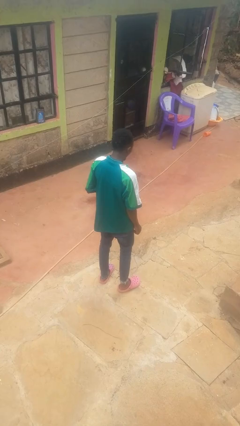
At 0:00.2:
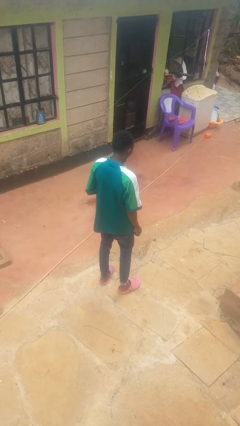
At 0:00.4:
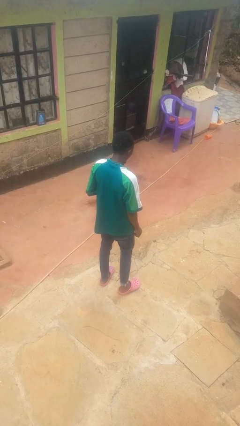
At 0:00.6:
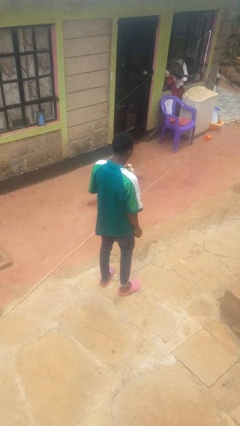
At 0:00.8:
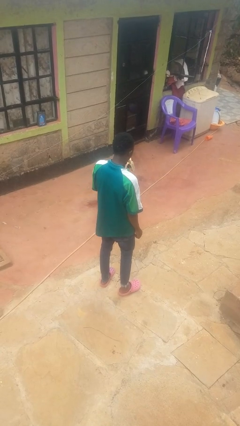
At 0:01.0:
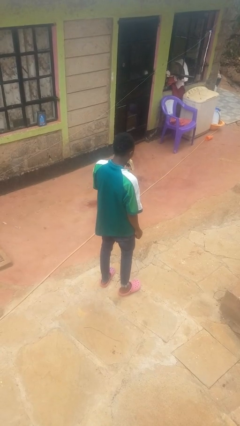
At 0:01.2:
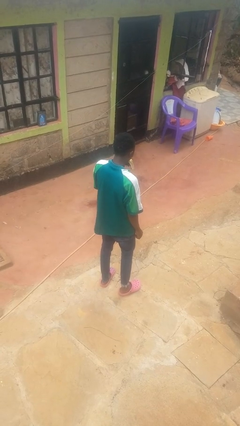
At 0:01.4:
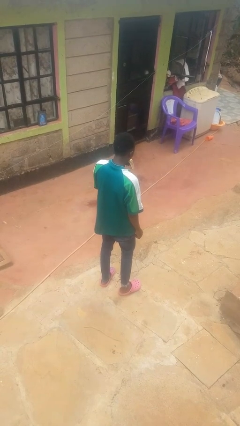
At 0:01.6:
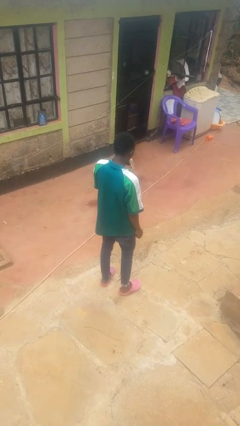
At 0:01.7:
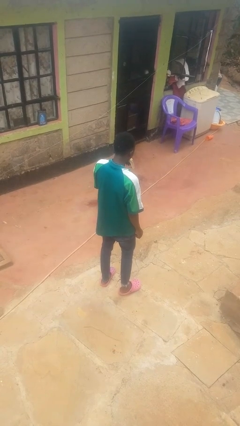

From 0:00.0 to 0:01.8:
person eats banana

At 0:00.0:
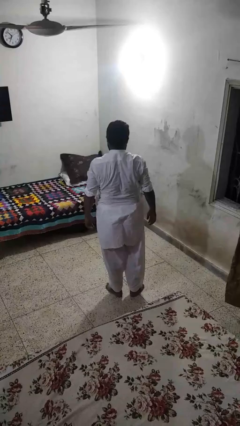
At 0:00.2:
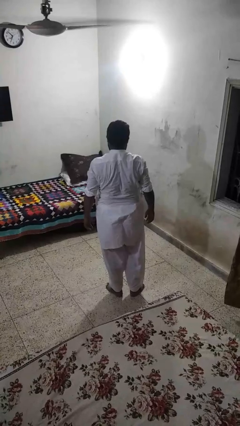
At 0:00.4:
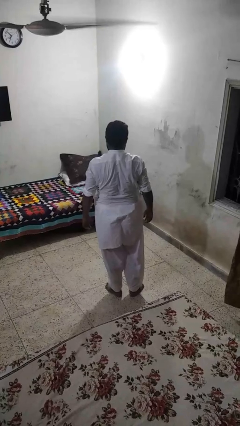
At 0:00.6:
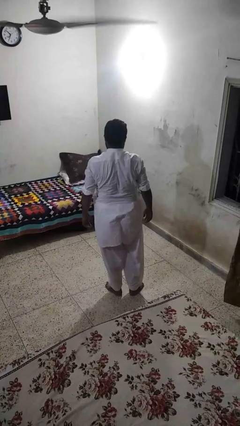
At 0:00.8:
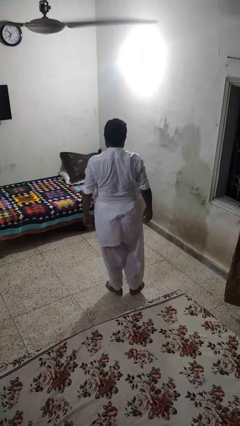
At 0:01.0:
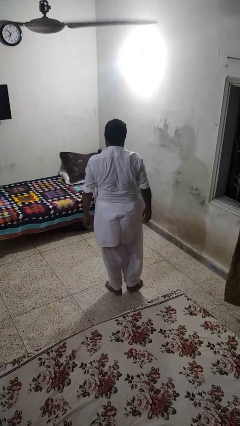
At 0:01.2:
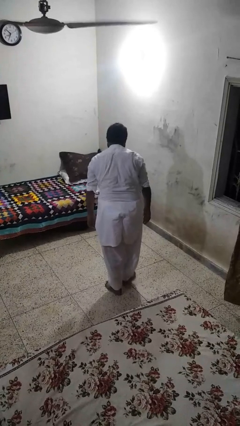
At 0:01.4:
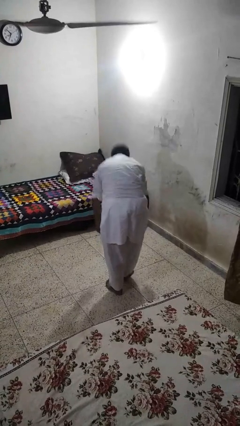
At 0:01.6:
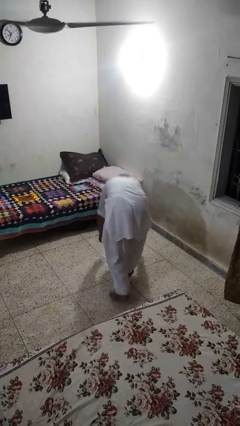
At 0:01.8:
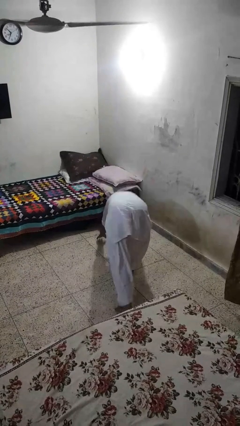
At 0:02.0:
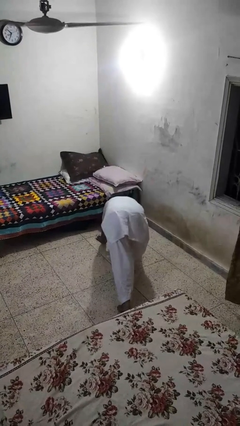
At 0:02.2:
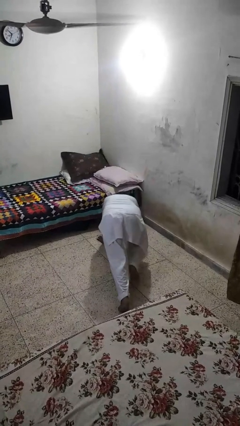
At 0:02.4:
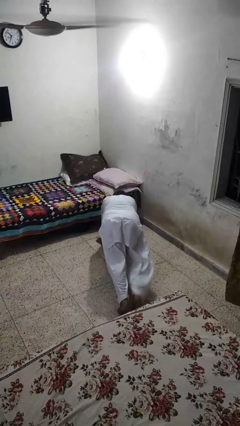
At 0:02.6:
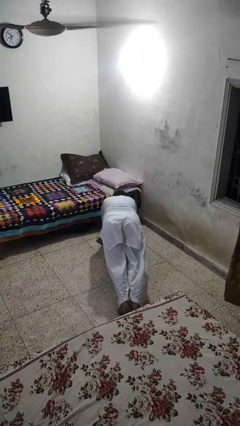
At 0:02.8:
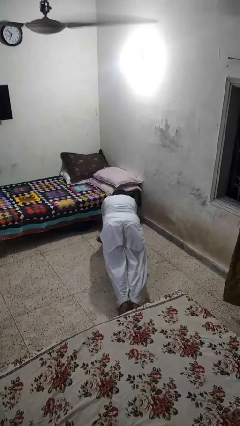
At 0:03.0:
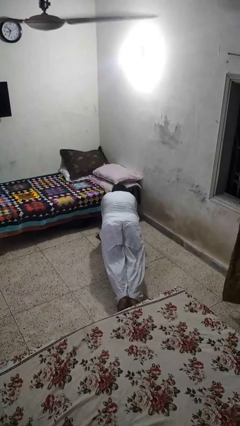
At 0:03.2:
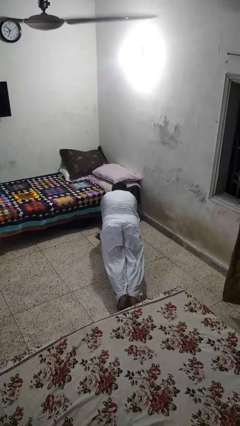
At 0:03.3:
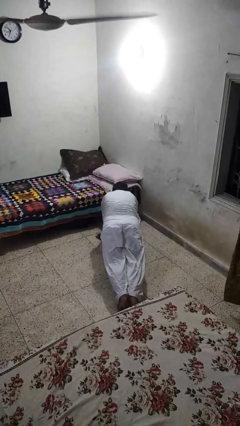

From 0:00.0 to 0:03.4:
person exercises with plank

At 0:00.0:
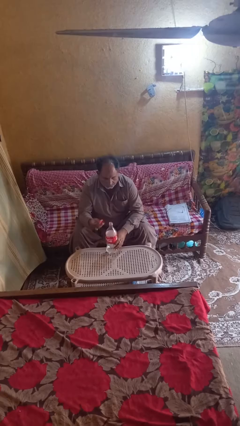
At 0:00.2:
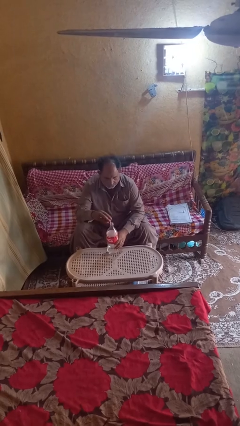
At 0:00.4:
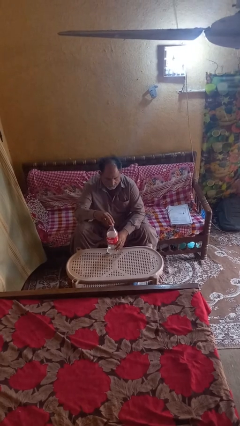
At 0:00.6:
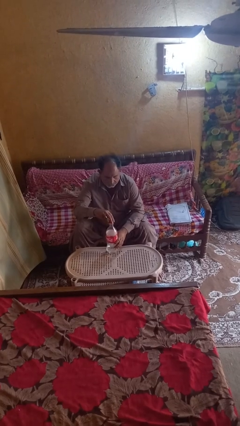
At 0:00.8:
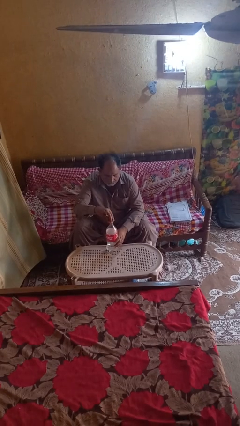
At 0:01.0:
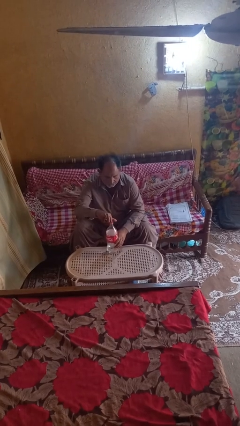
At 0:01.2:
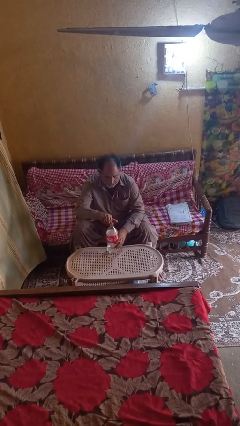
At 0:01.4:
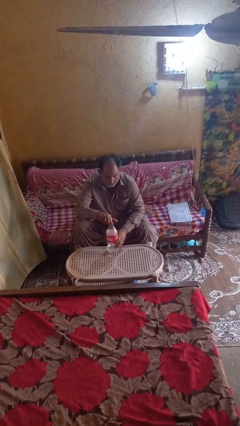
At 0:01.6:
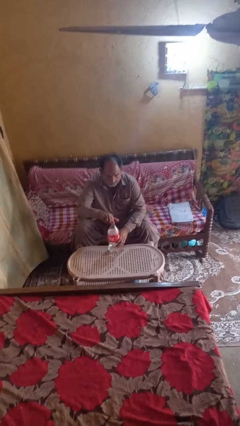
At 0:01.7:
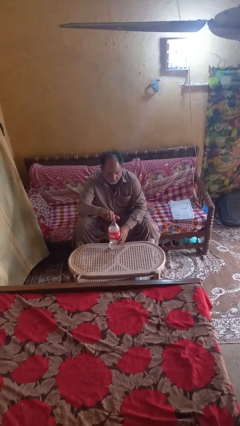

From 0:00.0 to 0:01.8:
person screws lid to bottle

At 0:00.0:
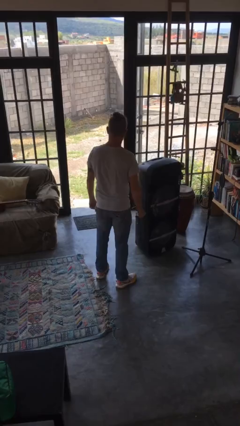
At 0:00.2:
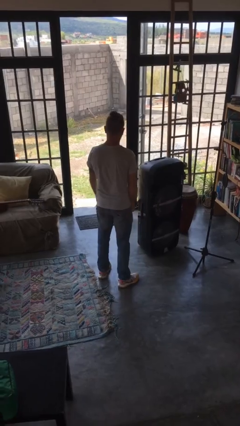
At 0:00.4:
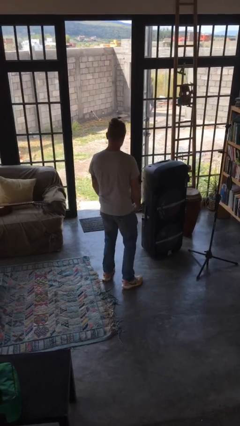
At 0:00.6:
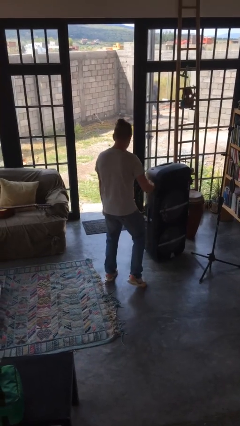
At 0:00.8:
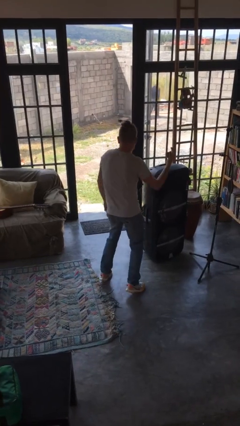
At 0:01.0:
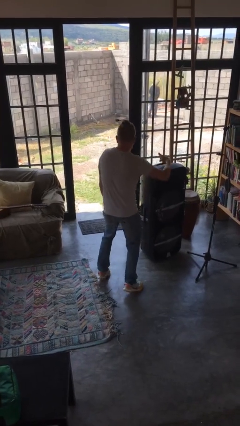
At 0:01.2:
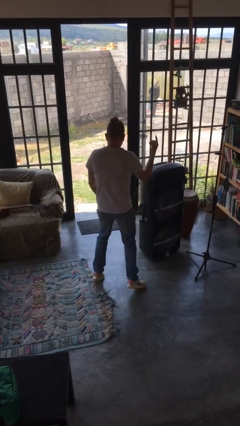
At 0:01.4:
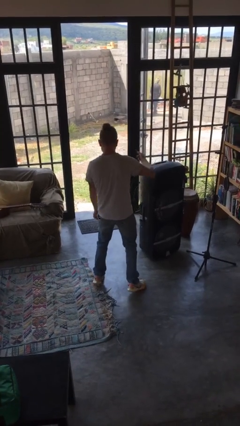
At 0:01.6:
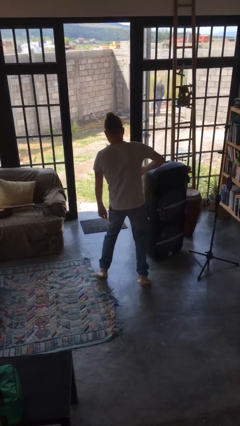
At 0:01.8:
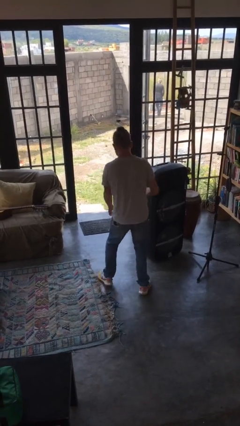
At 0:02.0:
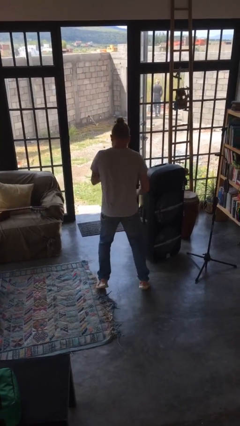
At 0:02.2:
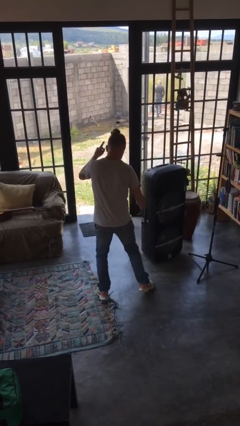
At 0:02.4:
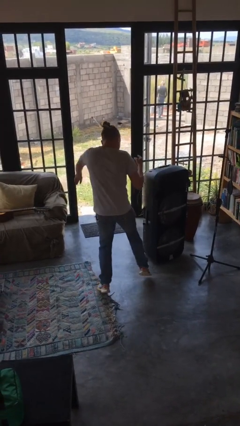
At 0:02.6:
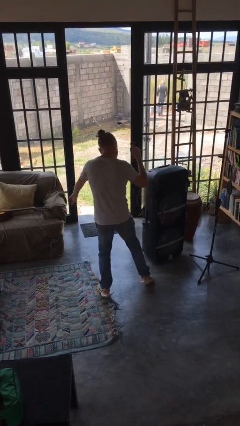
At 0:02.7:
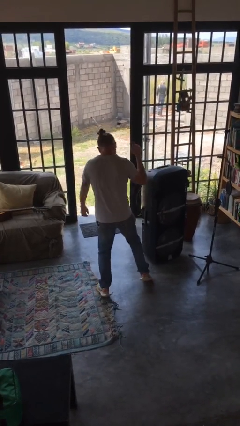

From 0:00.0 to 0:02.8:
person dances in place

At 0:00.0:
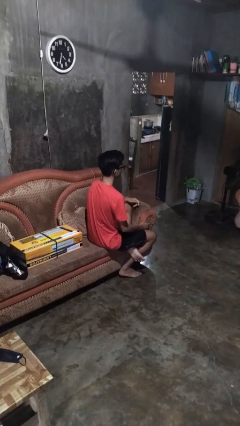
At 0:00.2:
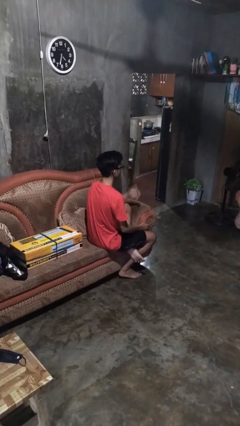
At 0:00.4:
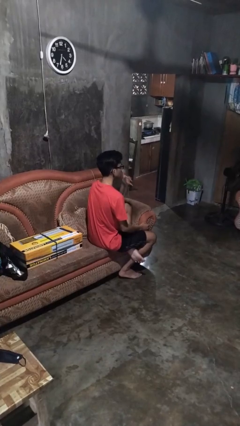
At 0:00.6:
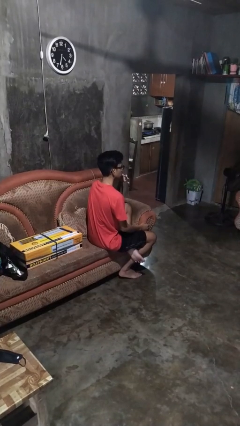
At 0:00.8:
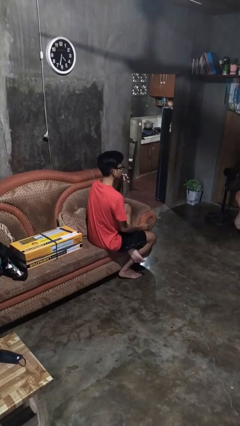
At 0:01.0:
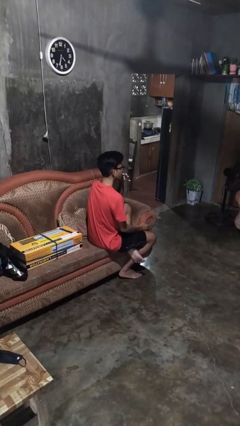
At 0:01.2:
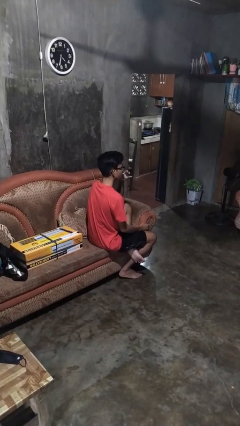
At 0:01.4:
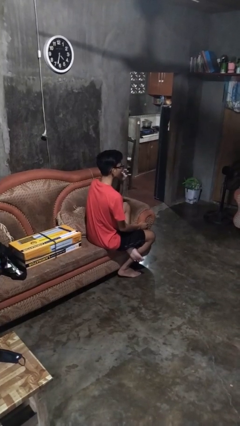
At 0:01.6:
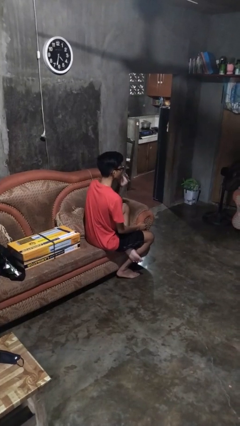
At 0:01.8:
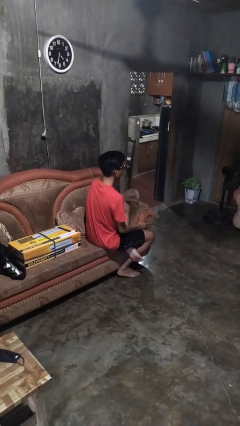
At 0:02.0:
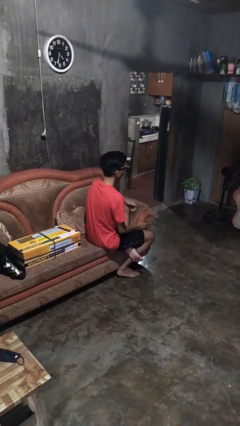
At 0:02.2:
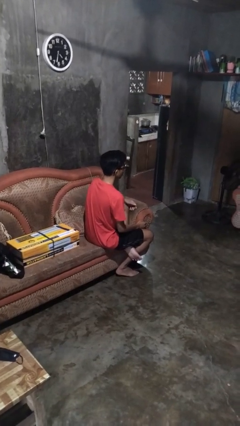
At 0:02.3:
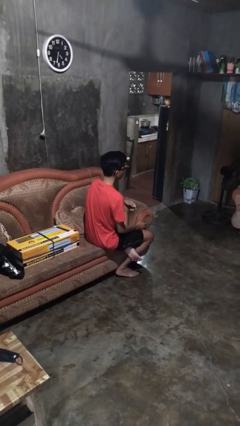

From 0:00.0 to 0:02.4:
person licks fingers

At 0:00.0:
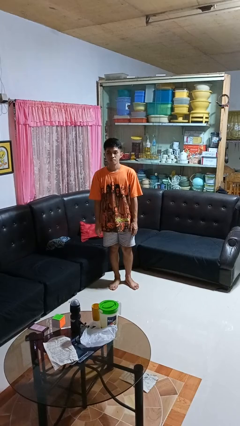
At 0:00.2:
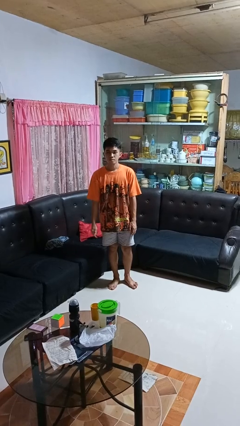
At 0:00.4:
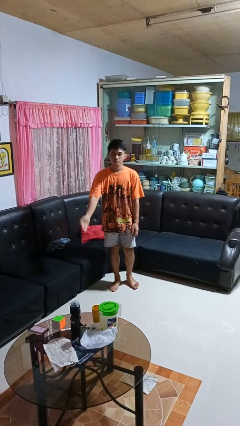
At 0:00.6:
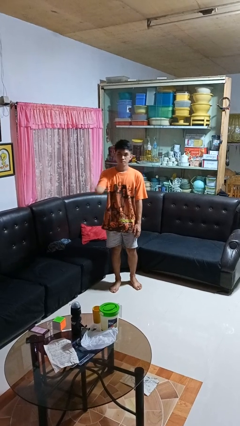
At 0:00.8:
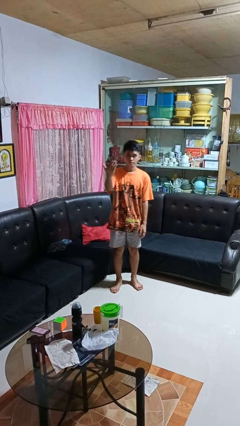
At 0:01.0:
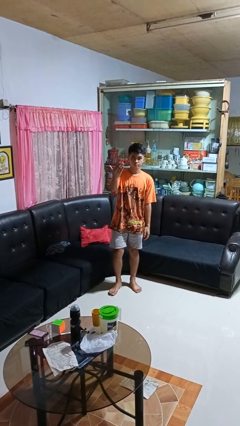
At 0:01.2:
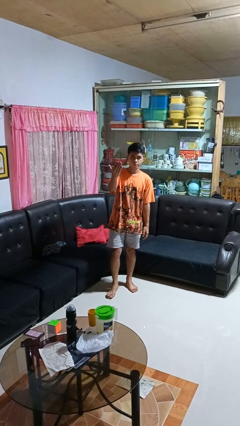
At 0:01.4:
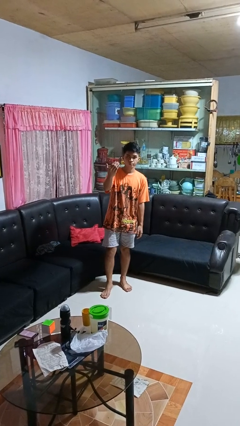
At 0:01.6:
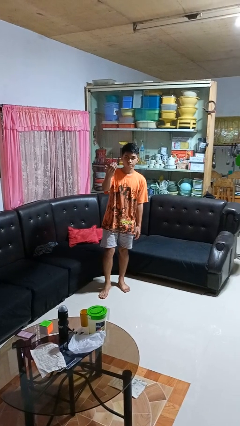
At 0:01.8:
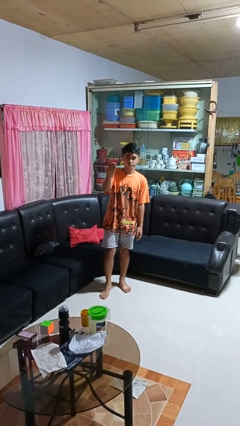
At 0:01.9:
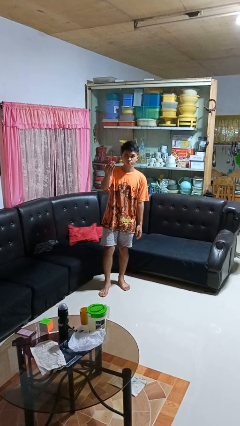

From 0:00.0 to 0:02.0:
person gestures come here

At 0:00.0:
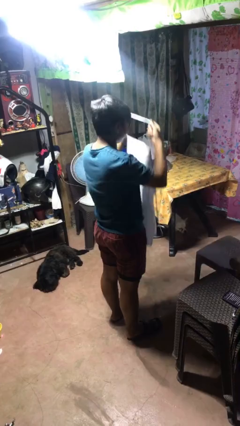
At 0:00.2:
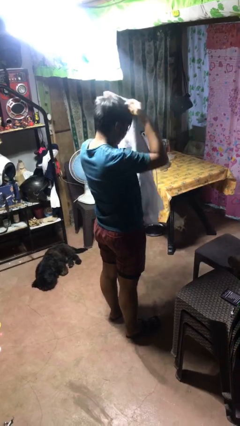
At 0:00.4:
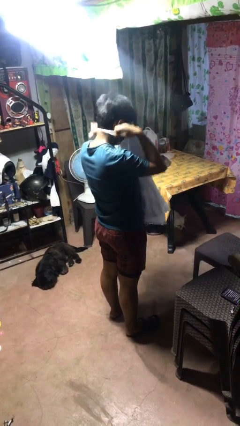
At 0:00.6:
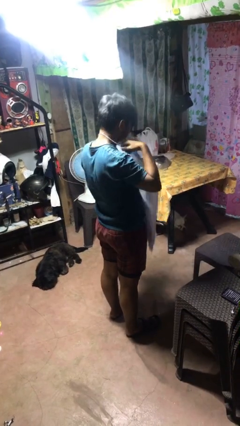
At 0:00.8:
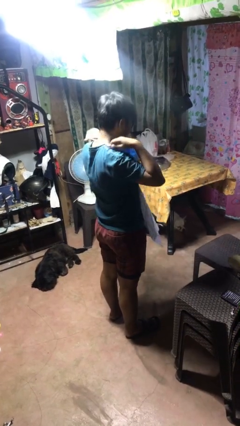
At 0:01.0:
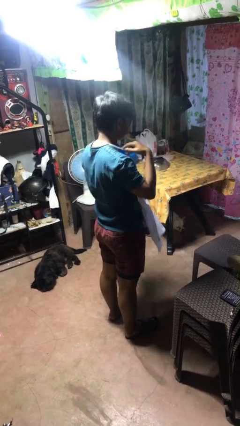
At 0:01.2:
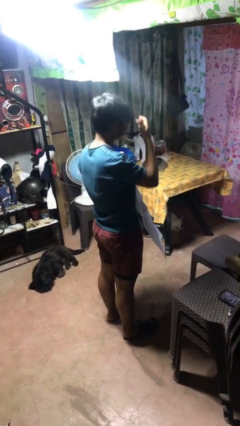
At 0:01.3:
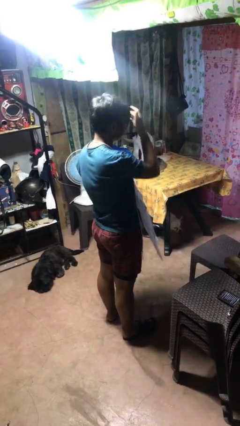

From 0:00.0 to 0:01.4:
person puts on apron

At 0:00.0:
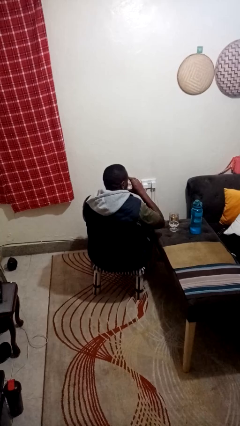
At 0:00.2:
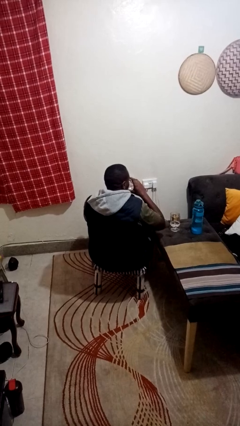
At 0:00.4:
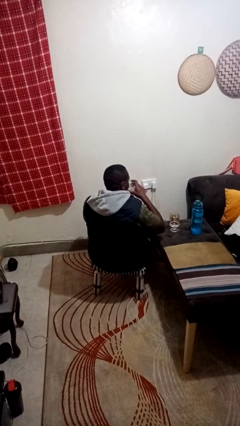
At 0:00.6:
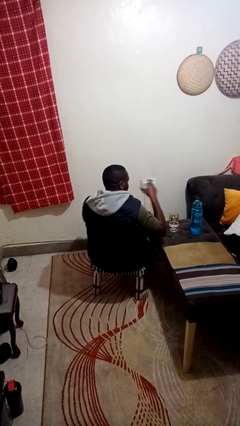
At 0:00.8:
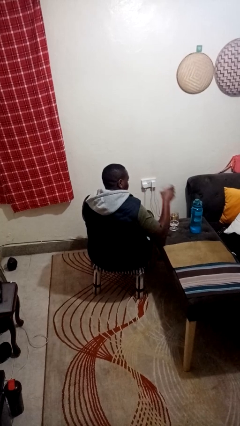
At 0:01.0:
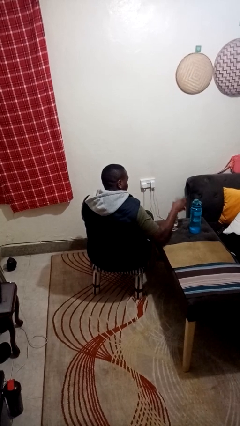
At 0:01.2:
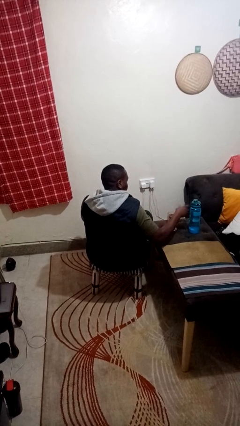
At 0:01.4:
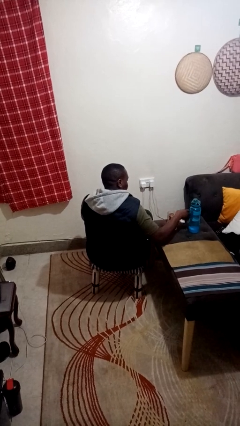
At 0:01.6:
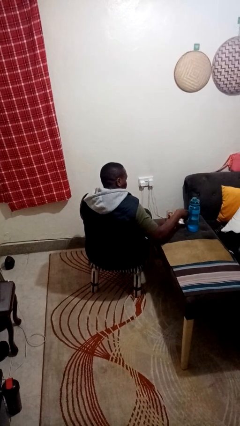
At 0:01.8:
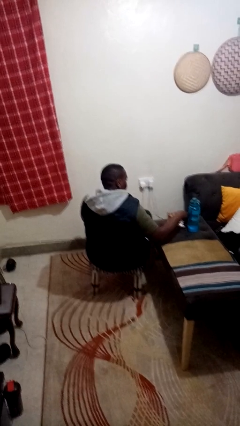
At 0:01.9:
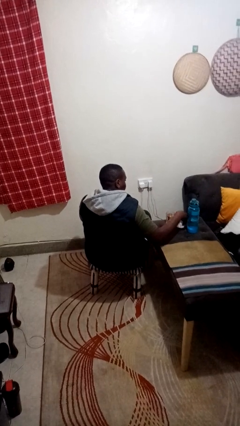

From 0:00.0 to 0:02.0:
person puts down object on table
